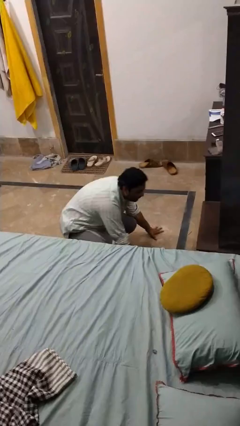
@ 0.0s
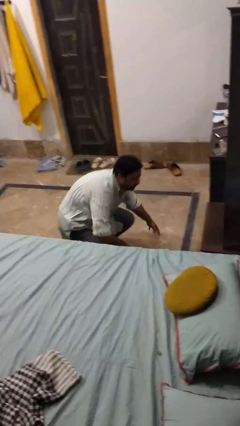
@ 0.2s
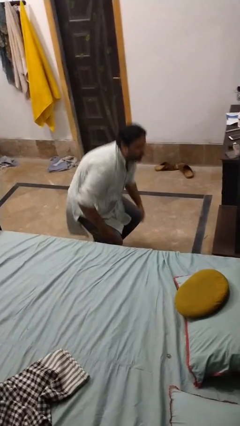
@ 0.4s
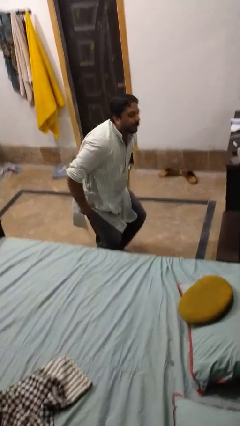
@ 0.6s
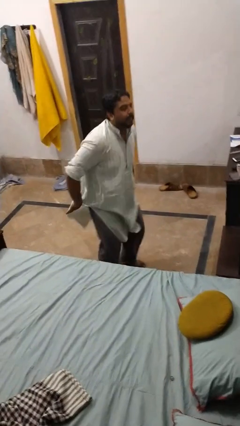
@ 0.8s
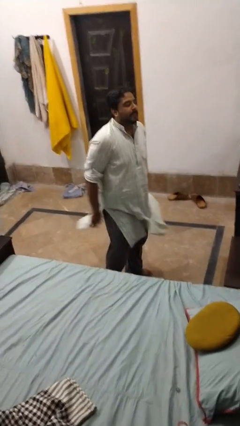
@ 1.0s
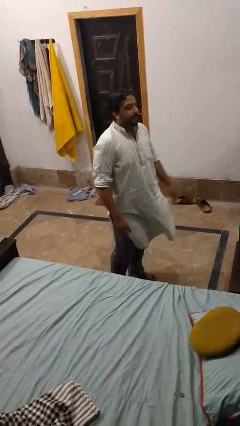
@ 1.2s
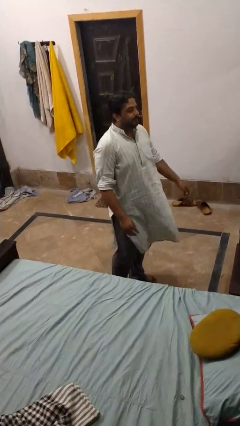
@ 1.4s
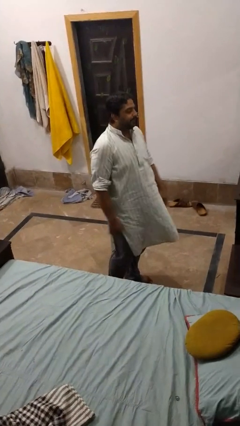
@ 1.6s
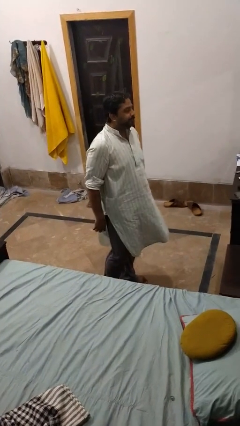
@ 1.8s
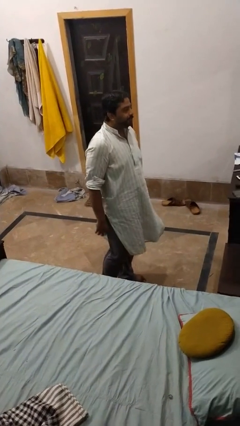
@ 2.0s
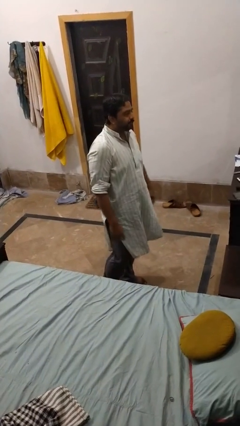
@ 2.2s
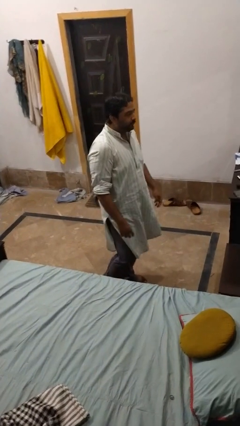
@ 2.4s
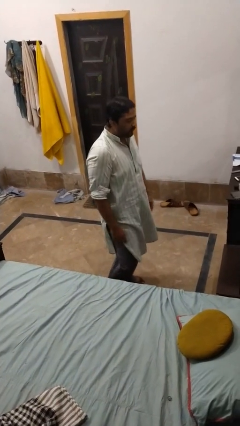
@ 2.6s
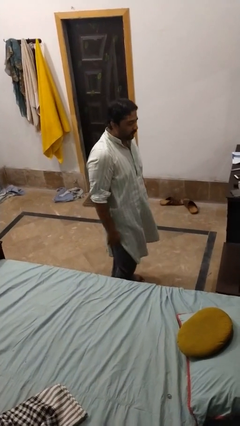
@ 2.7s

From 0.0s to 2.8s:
person stands up from floor

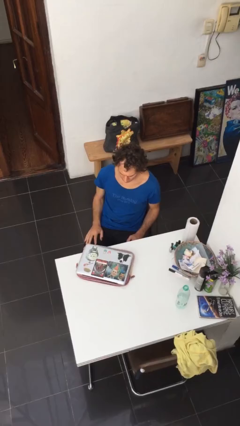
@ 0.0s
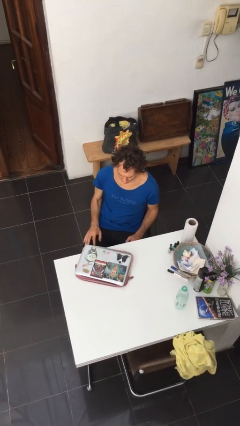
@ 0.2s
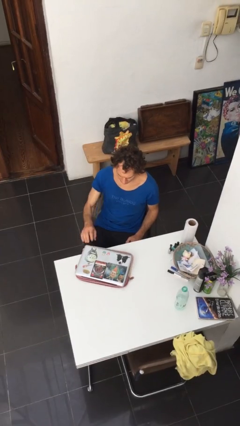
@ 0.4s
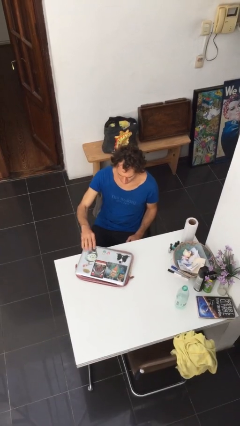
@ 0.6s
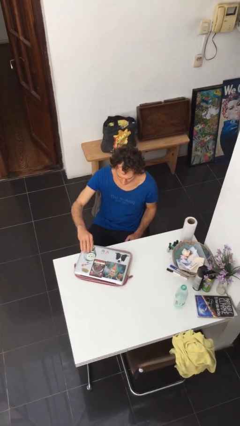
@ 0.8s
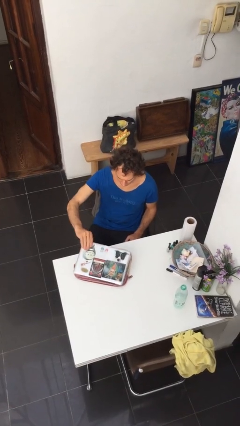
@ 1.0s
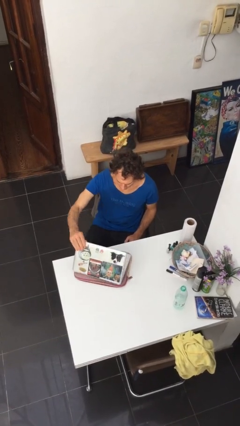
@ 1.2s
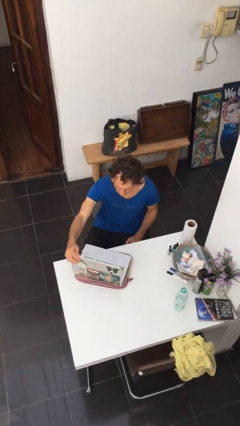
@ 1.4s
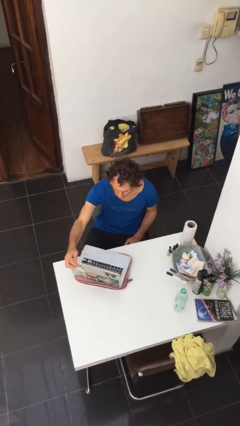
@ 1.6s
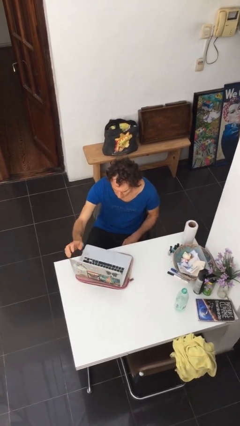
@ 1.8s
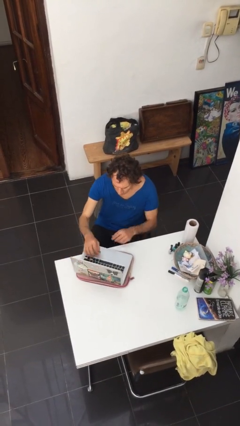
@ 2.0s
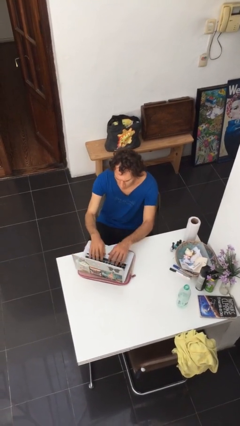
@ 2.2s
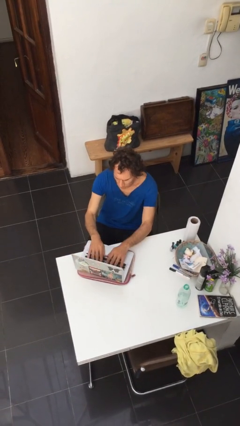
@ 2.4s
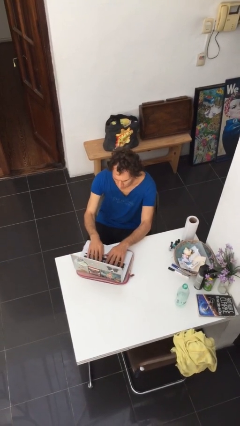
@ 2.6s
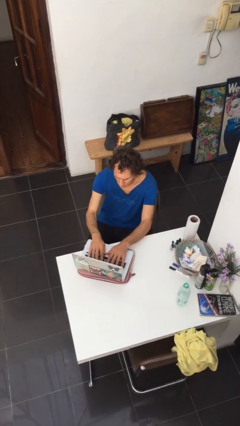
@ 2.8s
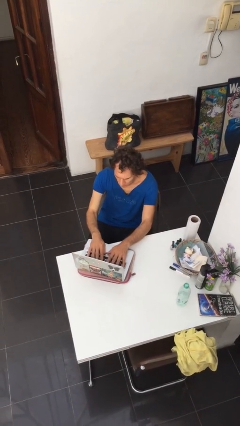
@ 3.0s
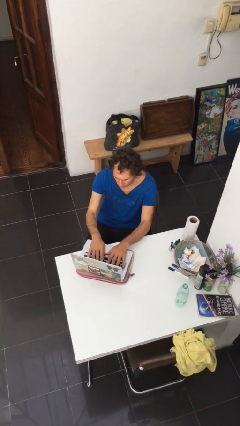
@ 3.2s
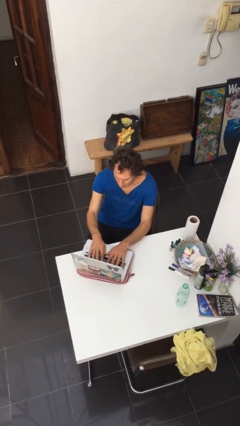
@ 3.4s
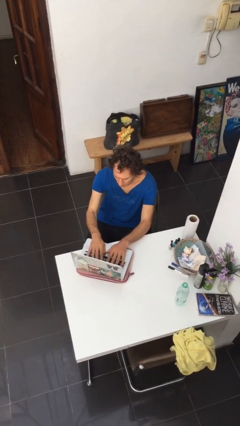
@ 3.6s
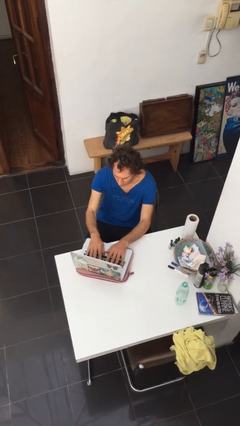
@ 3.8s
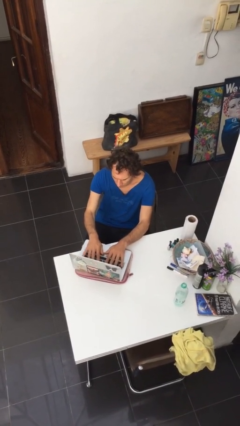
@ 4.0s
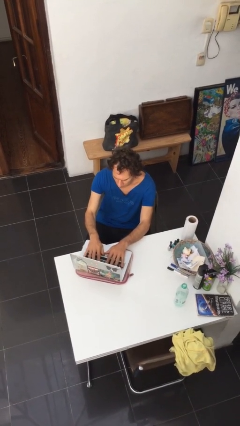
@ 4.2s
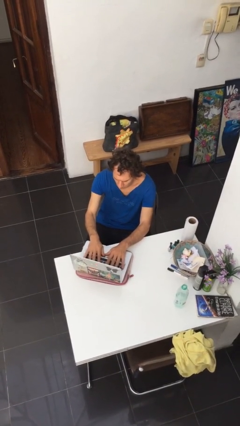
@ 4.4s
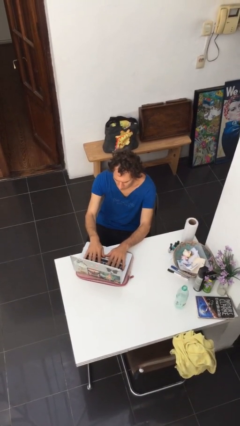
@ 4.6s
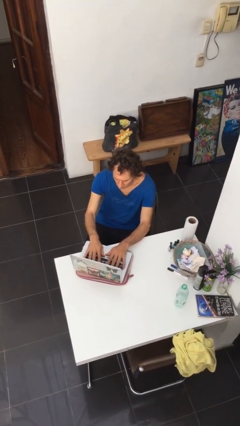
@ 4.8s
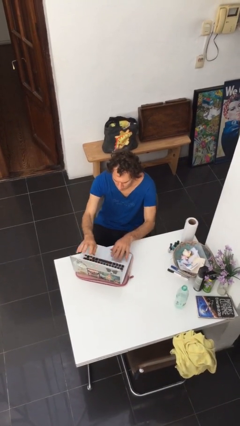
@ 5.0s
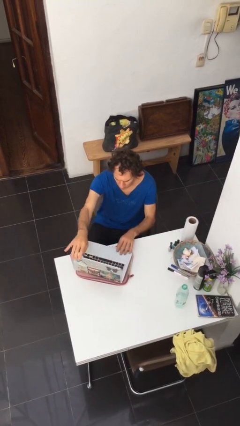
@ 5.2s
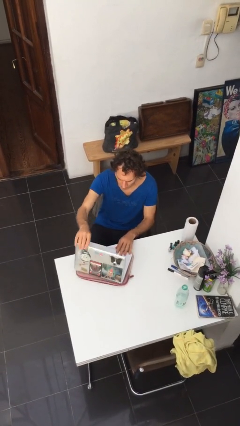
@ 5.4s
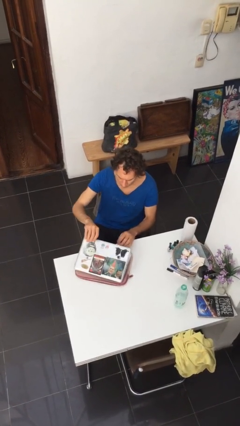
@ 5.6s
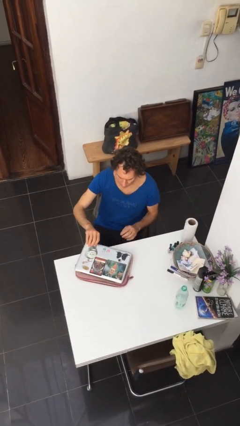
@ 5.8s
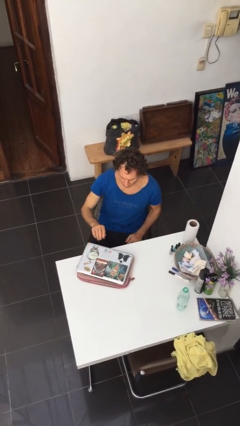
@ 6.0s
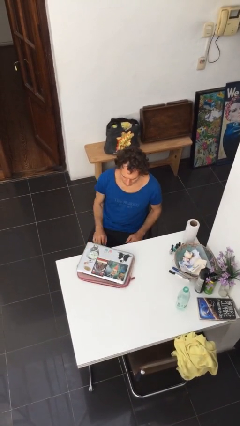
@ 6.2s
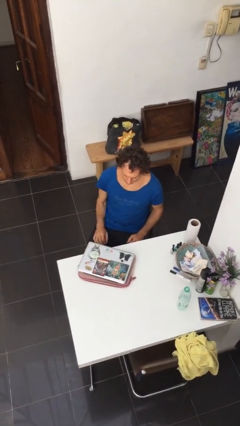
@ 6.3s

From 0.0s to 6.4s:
person interacts with laptop

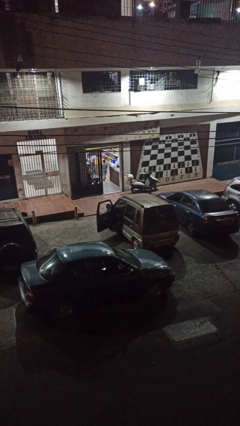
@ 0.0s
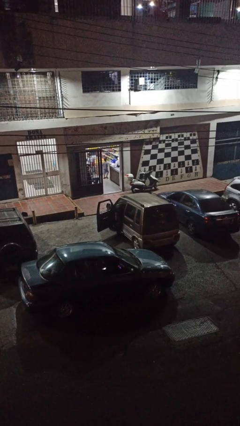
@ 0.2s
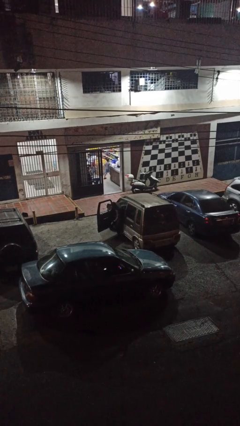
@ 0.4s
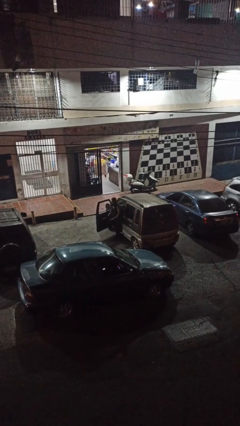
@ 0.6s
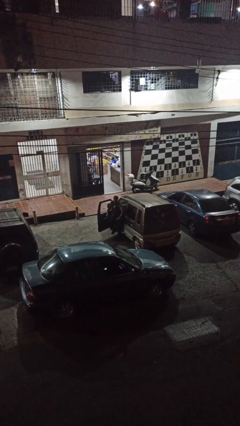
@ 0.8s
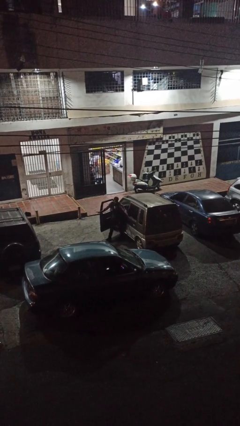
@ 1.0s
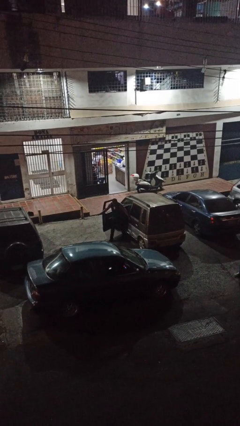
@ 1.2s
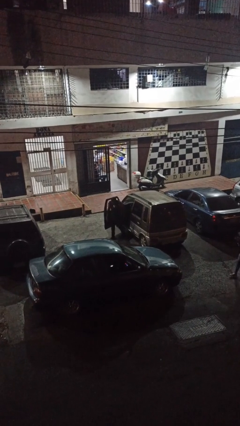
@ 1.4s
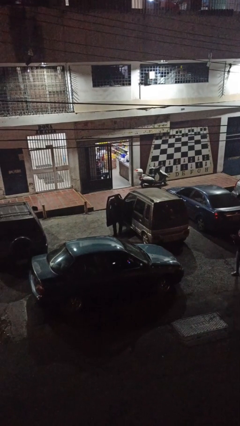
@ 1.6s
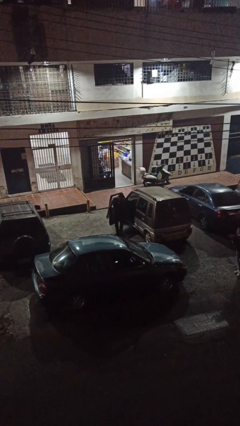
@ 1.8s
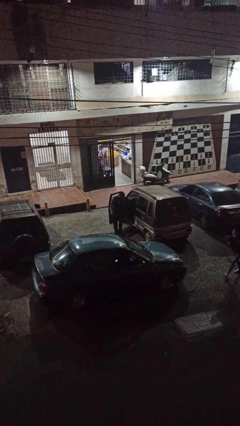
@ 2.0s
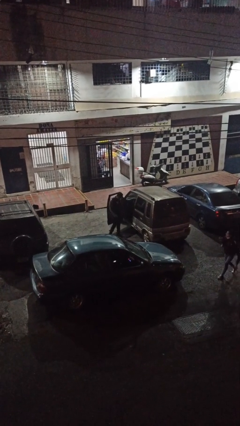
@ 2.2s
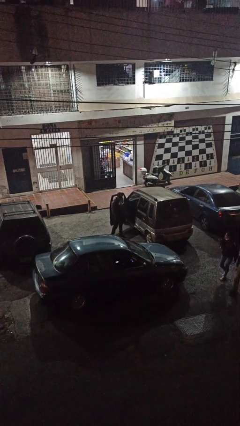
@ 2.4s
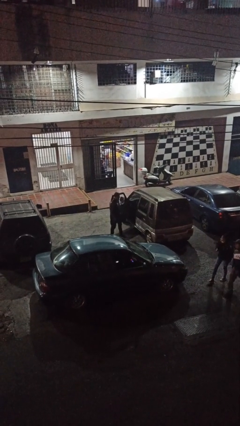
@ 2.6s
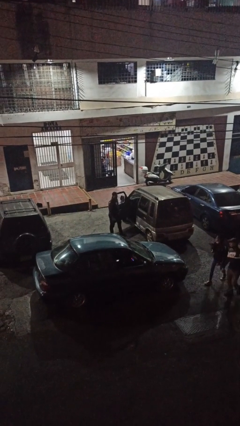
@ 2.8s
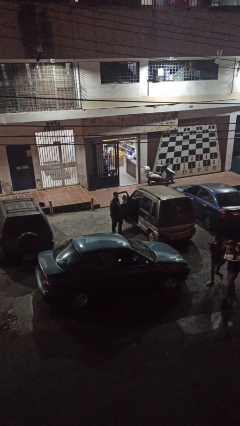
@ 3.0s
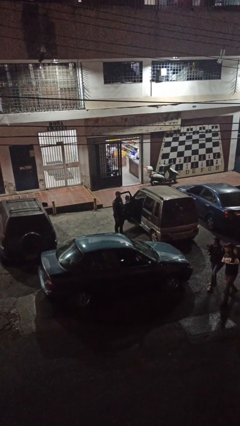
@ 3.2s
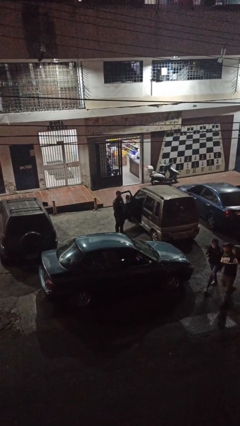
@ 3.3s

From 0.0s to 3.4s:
person exits car

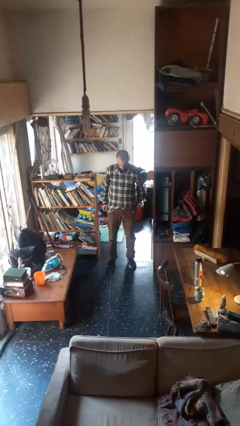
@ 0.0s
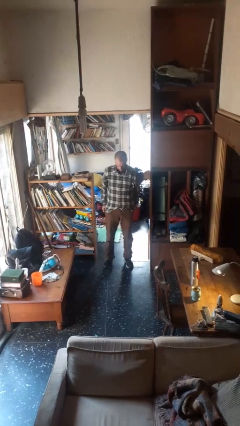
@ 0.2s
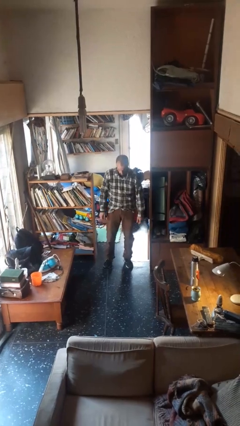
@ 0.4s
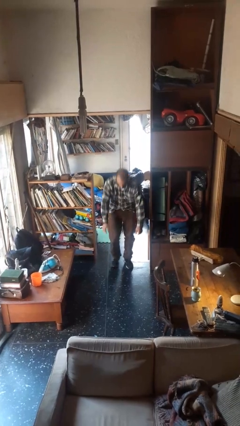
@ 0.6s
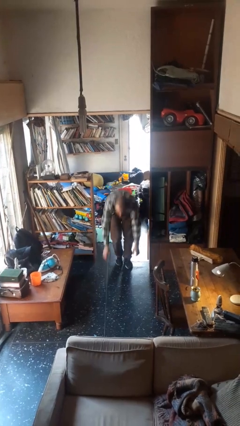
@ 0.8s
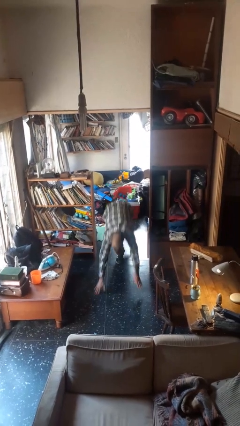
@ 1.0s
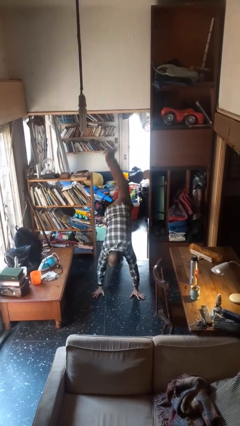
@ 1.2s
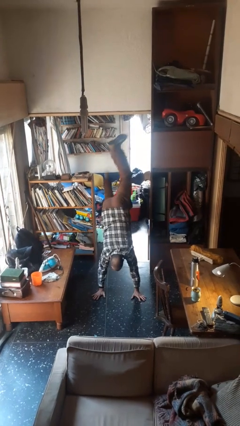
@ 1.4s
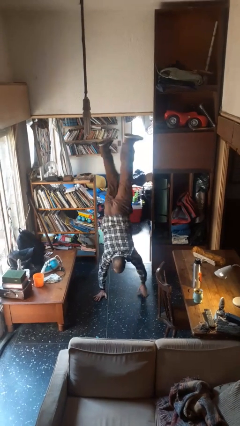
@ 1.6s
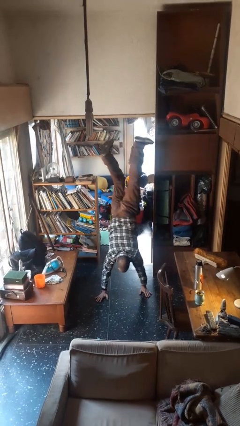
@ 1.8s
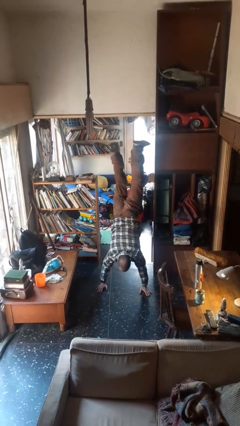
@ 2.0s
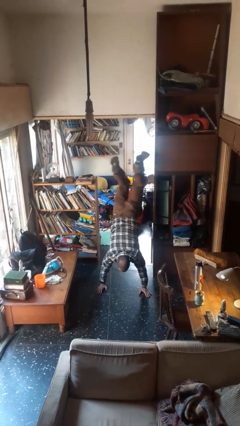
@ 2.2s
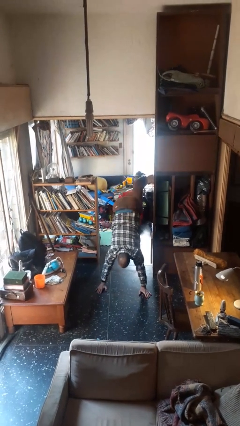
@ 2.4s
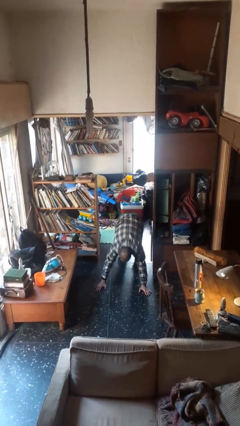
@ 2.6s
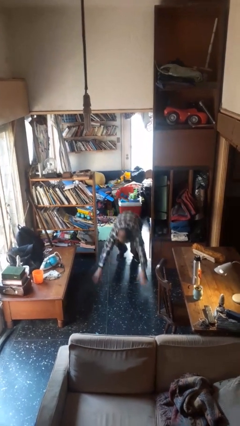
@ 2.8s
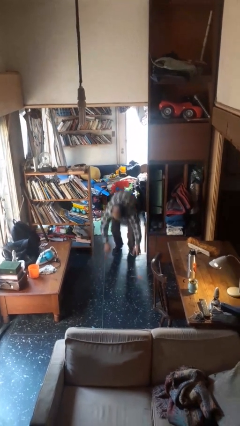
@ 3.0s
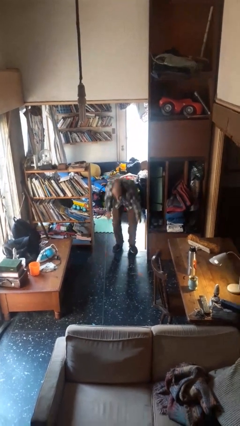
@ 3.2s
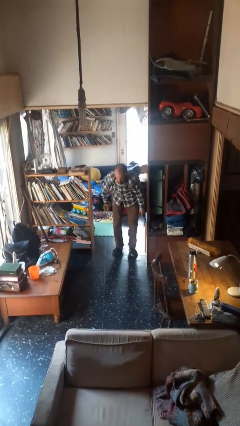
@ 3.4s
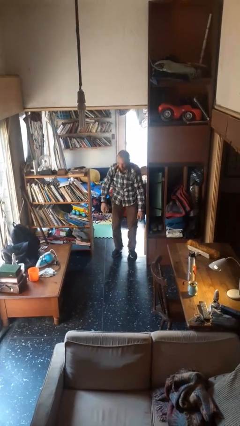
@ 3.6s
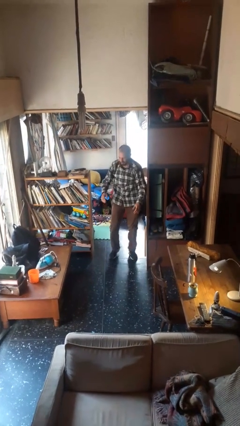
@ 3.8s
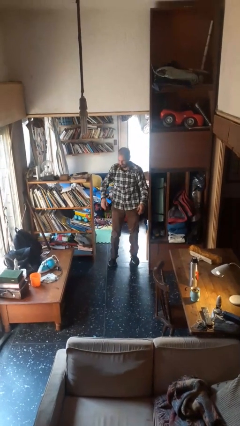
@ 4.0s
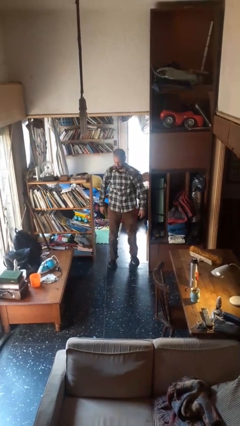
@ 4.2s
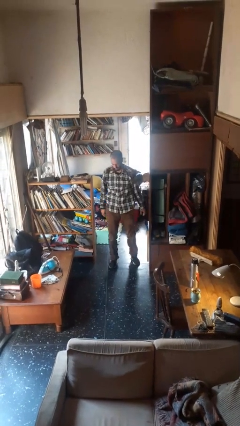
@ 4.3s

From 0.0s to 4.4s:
person handstand

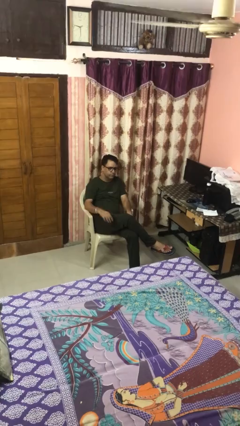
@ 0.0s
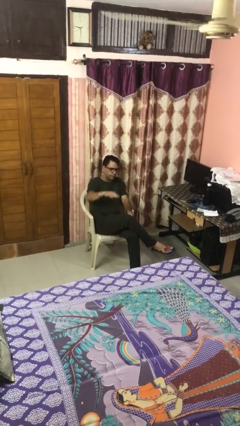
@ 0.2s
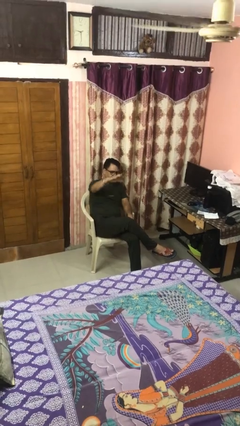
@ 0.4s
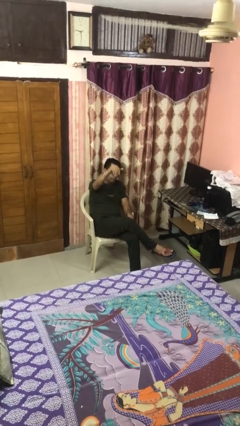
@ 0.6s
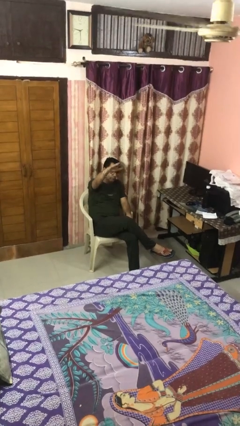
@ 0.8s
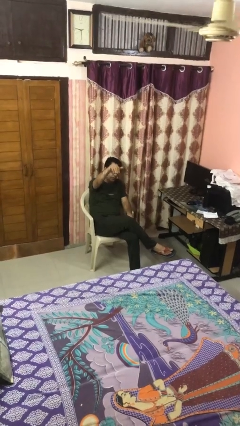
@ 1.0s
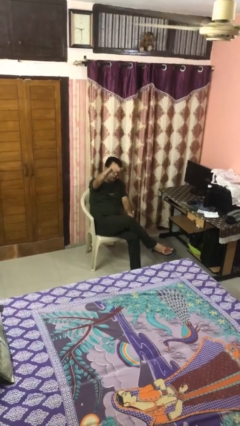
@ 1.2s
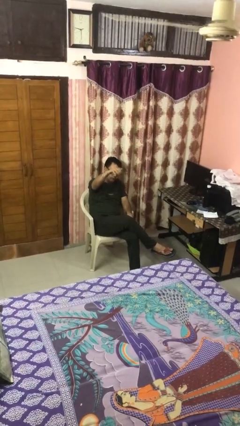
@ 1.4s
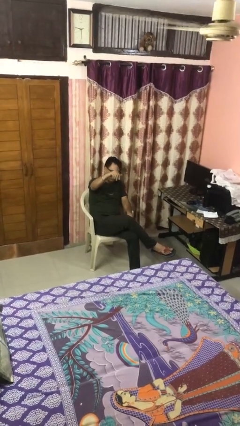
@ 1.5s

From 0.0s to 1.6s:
person gestures come here
